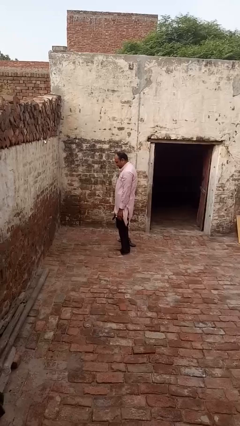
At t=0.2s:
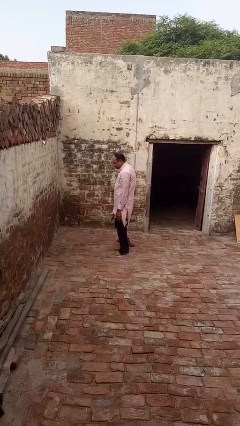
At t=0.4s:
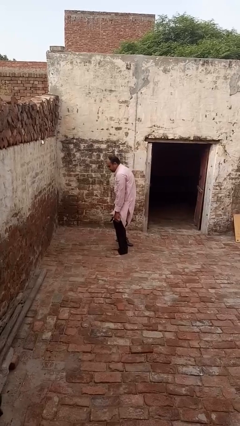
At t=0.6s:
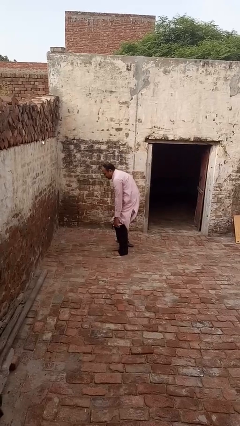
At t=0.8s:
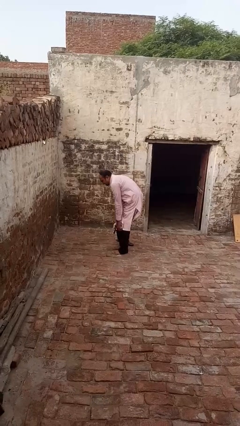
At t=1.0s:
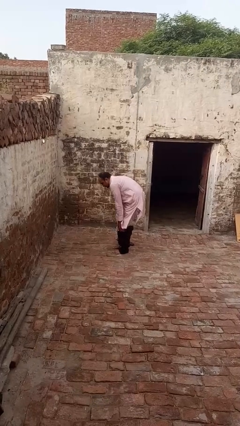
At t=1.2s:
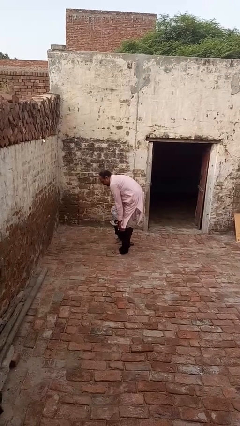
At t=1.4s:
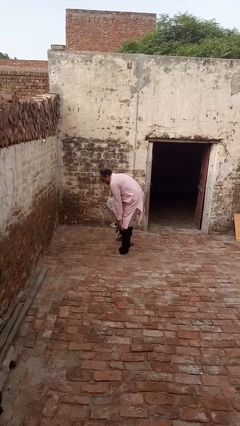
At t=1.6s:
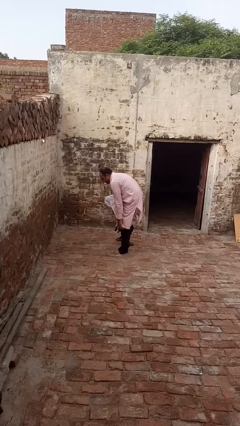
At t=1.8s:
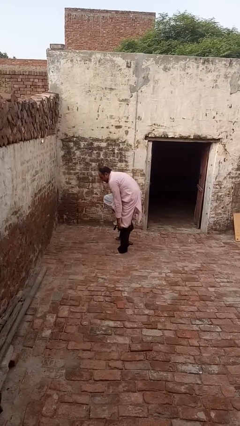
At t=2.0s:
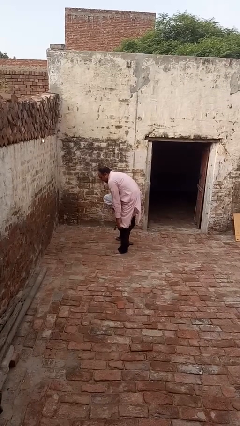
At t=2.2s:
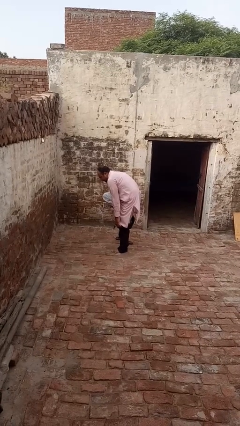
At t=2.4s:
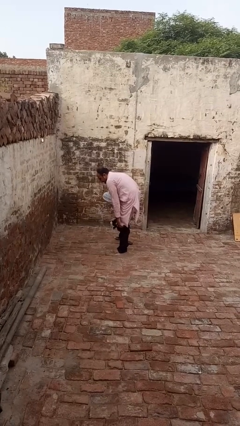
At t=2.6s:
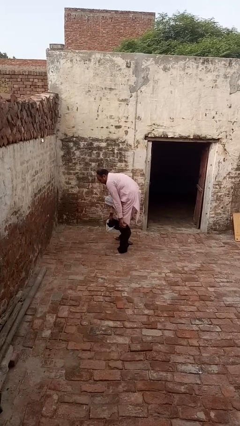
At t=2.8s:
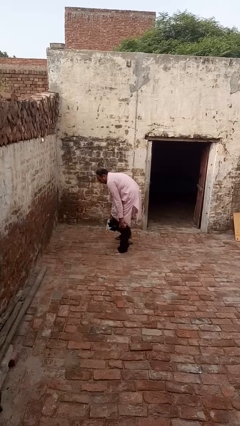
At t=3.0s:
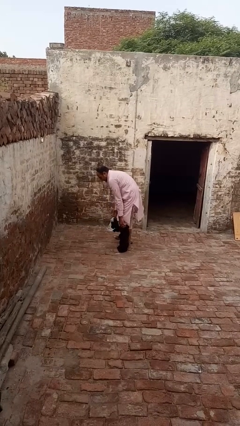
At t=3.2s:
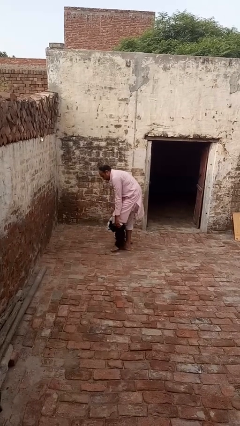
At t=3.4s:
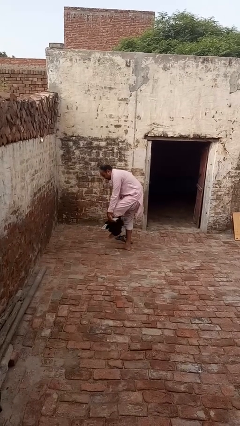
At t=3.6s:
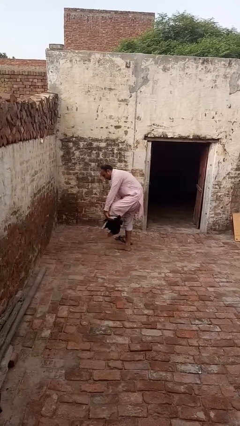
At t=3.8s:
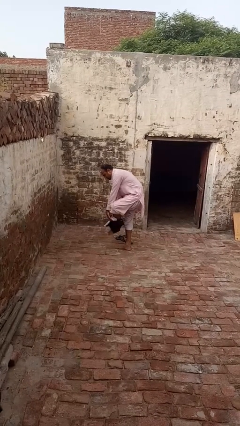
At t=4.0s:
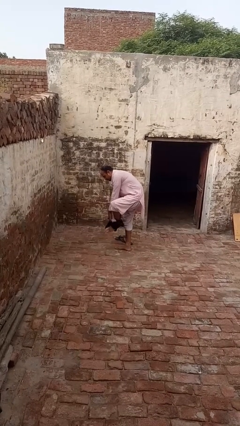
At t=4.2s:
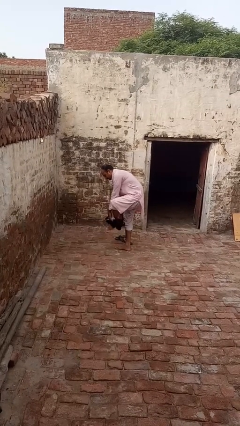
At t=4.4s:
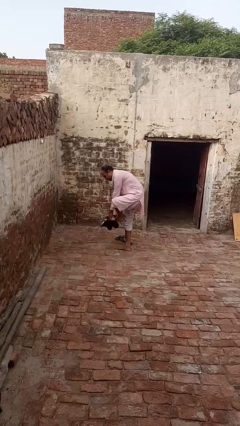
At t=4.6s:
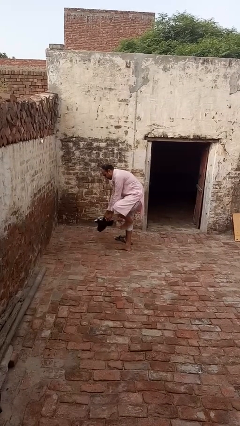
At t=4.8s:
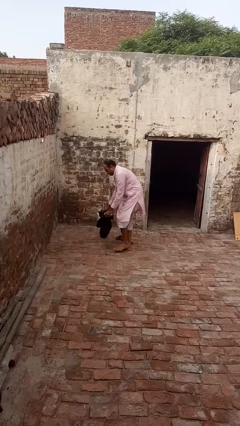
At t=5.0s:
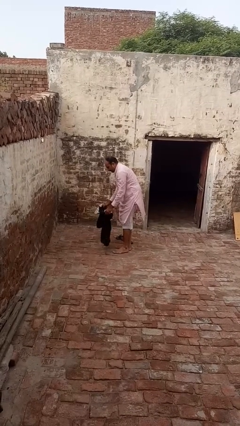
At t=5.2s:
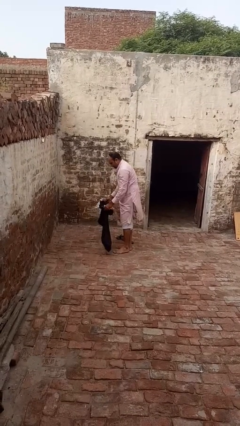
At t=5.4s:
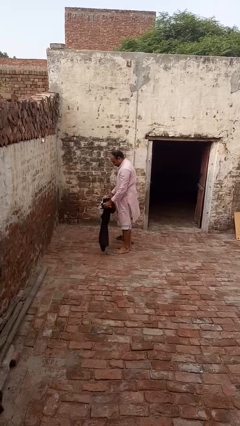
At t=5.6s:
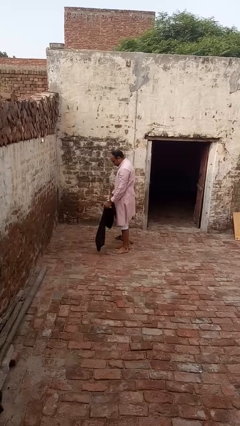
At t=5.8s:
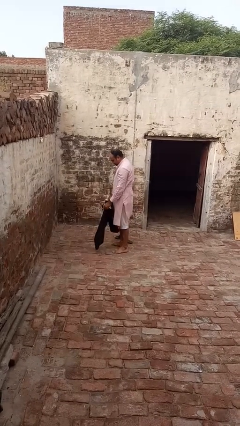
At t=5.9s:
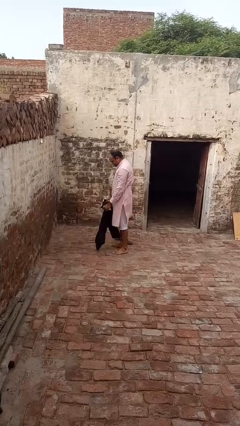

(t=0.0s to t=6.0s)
person takes off pants

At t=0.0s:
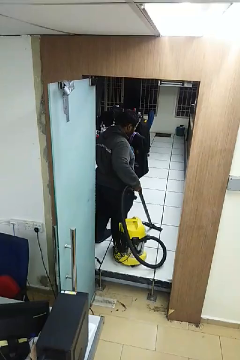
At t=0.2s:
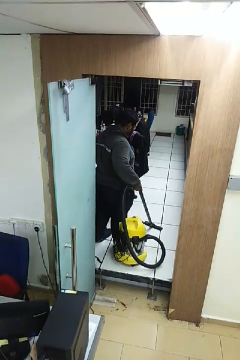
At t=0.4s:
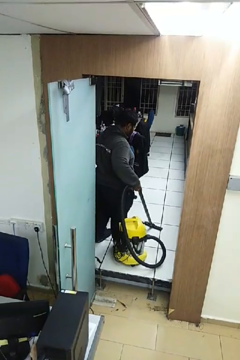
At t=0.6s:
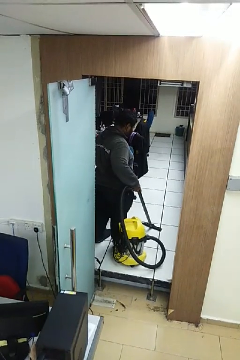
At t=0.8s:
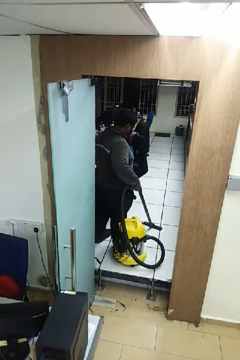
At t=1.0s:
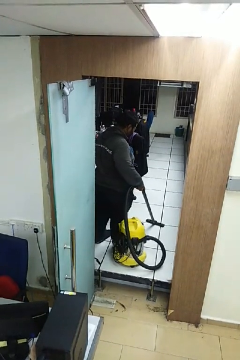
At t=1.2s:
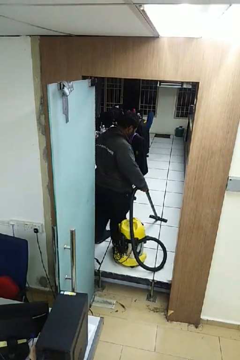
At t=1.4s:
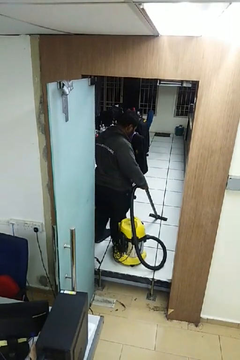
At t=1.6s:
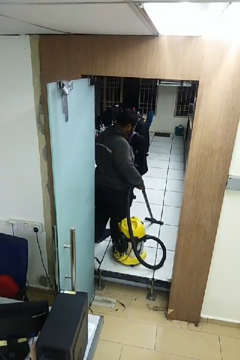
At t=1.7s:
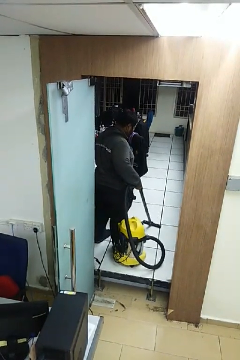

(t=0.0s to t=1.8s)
person vacuums carpet

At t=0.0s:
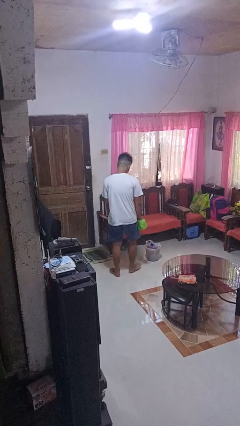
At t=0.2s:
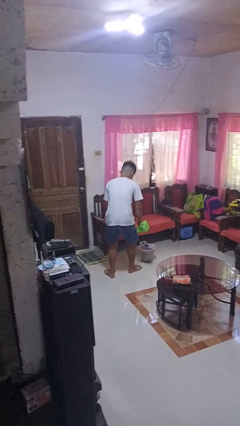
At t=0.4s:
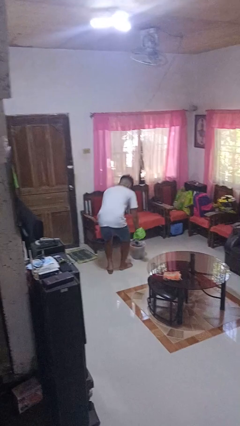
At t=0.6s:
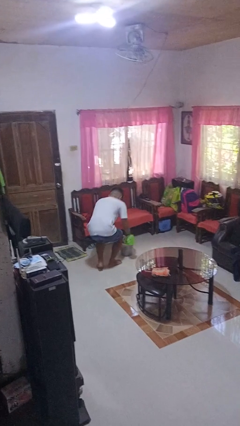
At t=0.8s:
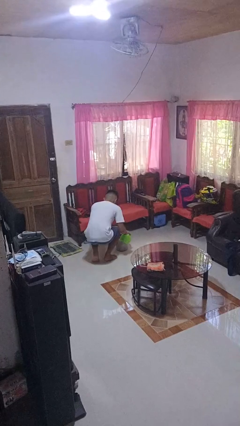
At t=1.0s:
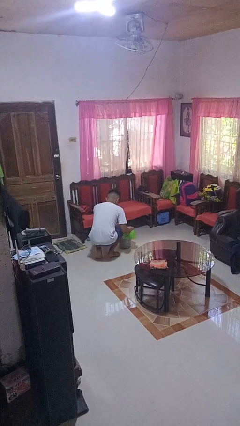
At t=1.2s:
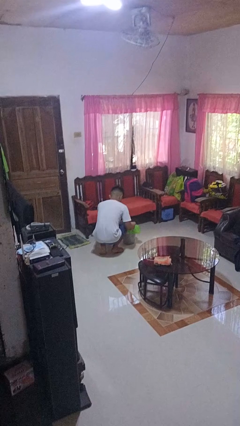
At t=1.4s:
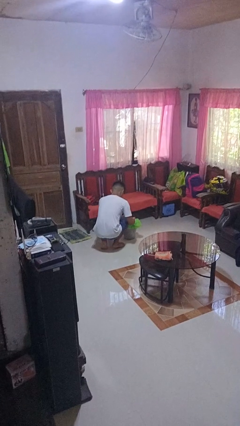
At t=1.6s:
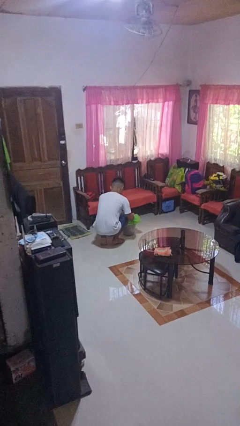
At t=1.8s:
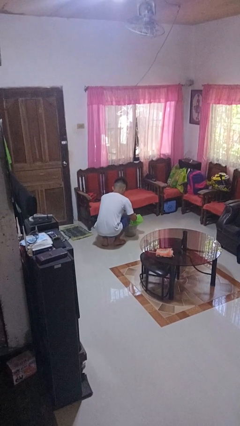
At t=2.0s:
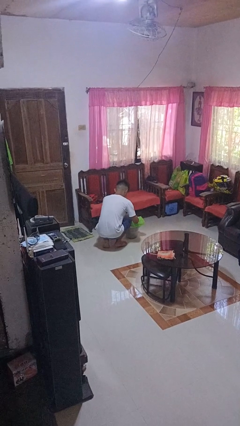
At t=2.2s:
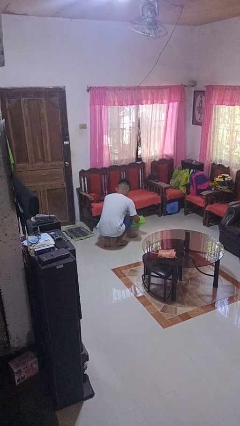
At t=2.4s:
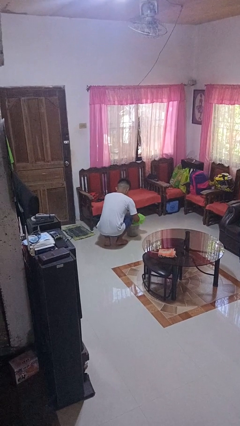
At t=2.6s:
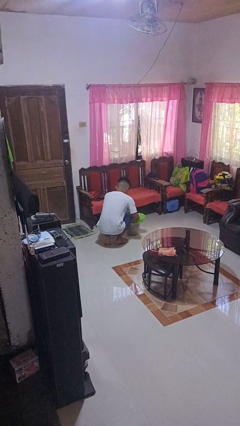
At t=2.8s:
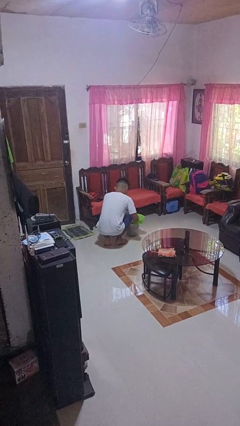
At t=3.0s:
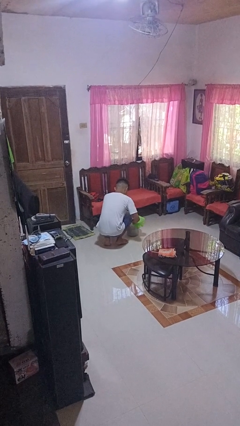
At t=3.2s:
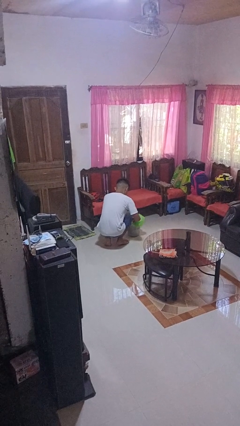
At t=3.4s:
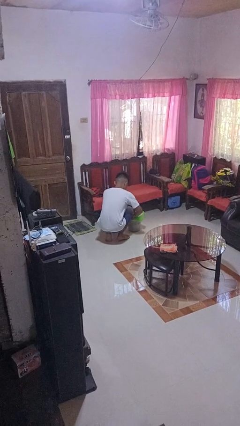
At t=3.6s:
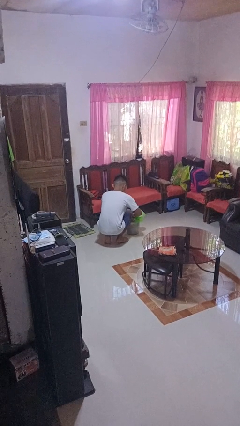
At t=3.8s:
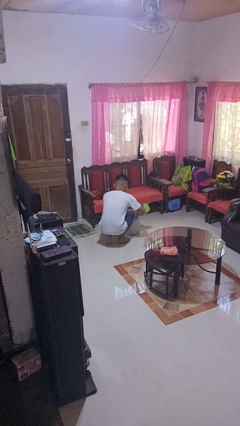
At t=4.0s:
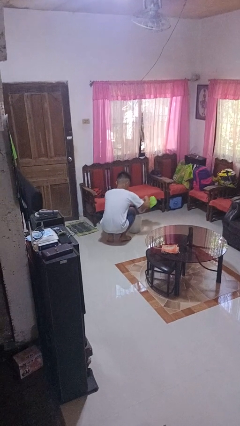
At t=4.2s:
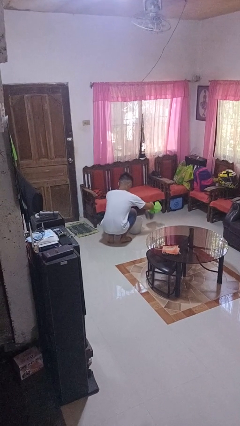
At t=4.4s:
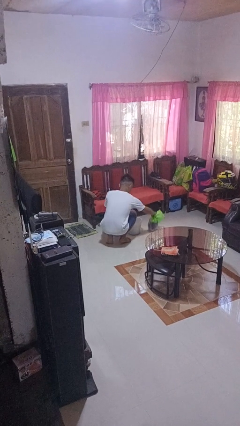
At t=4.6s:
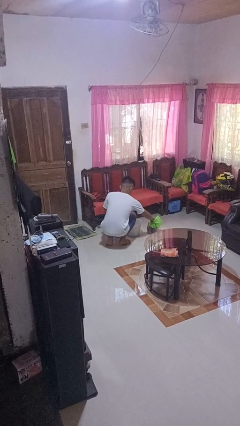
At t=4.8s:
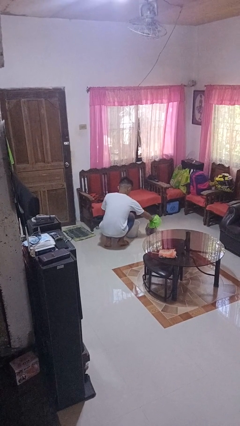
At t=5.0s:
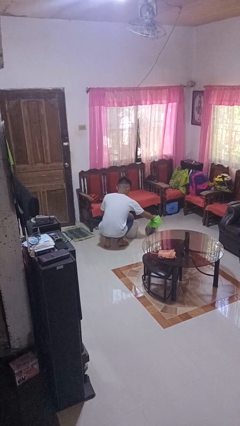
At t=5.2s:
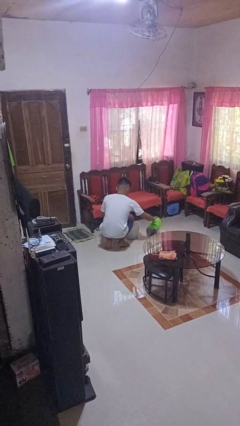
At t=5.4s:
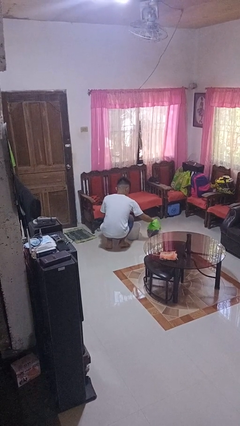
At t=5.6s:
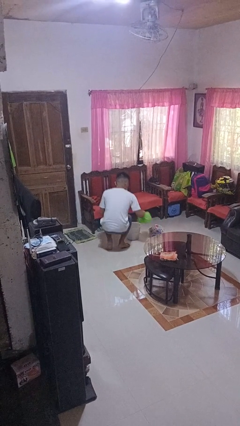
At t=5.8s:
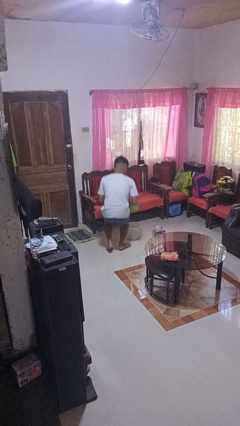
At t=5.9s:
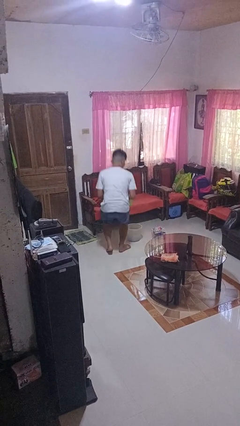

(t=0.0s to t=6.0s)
person removes trashbag from trashcan

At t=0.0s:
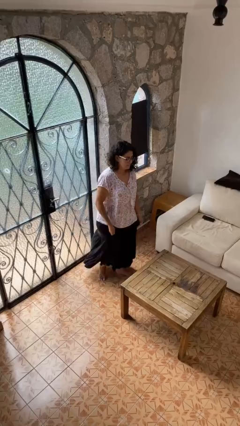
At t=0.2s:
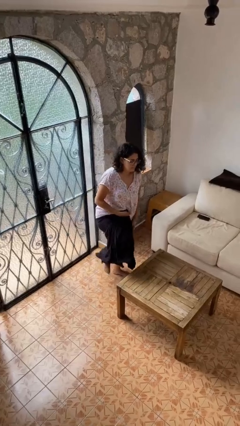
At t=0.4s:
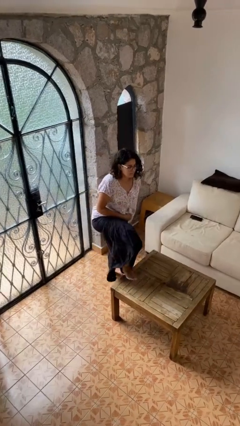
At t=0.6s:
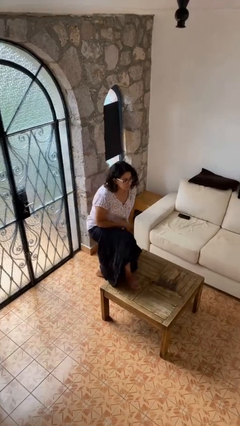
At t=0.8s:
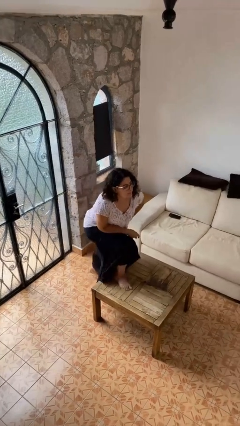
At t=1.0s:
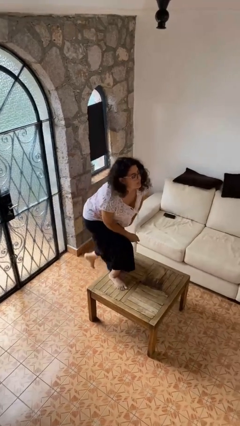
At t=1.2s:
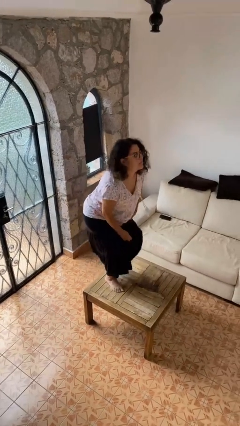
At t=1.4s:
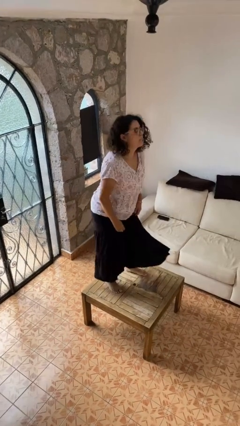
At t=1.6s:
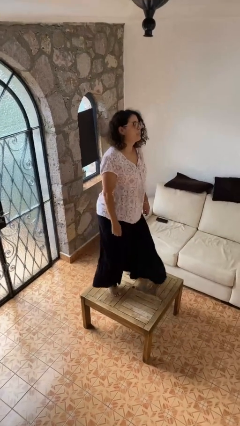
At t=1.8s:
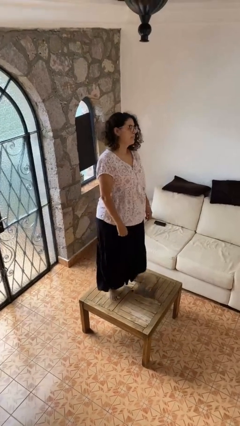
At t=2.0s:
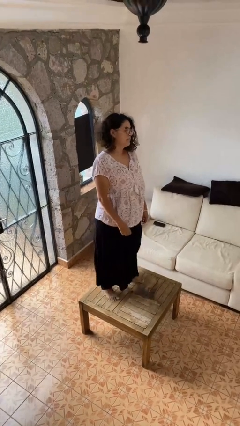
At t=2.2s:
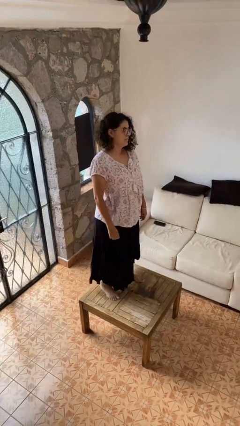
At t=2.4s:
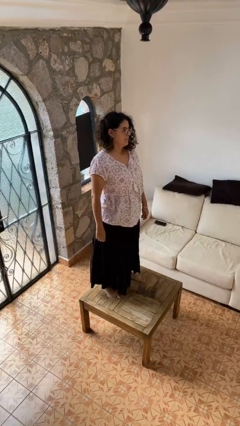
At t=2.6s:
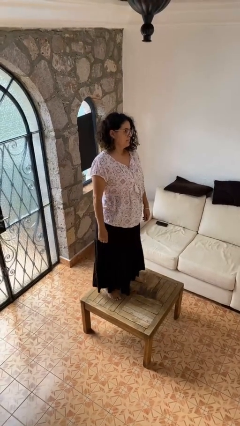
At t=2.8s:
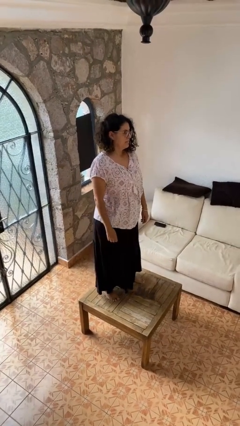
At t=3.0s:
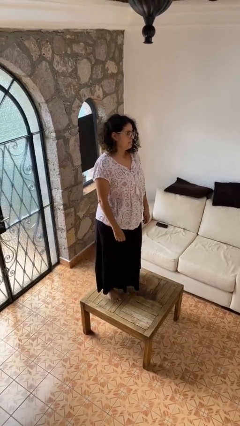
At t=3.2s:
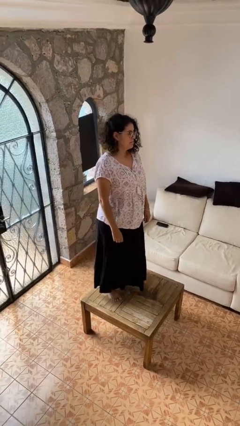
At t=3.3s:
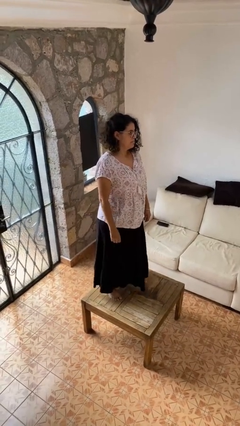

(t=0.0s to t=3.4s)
person climbs on table

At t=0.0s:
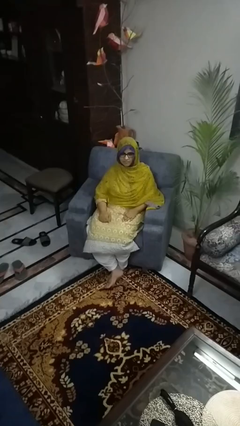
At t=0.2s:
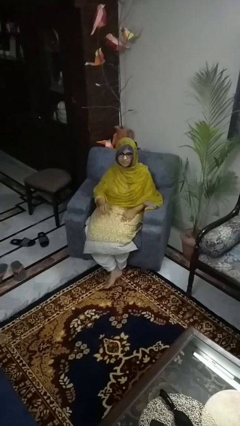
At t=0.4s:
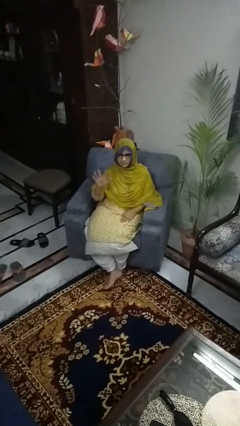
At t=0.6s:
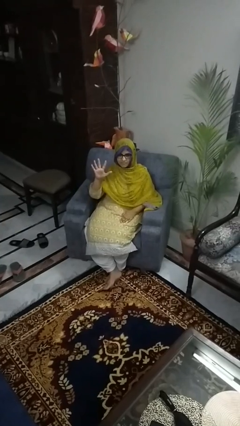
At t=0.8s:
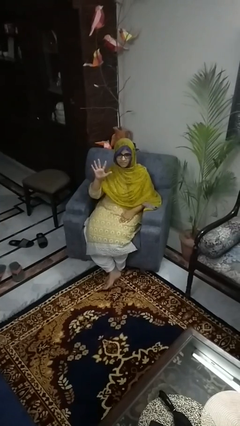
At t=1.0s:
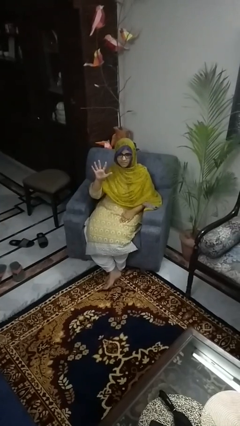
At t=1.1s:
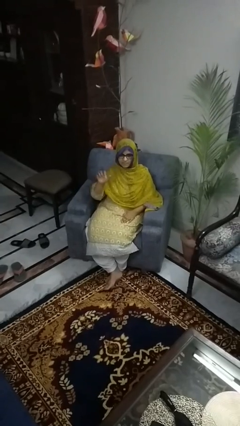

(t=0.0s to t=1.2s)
person gestures number five
